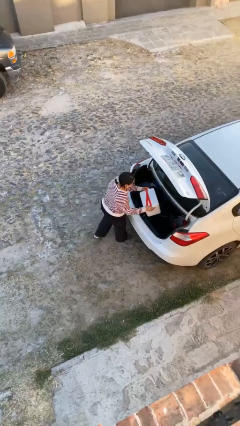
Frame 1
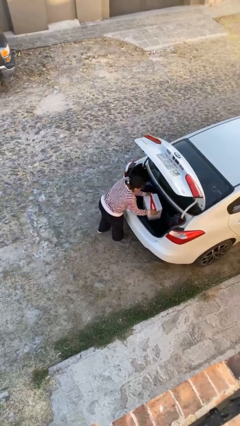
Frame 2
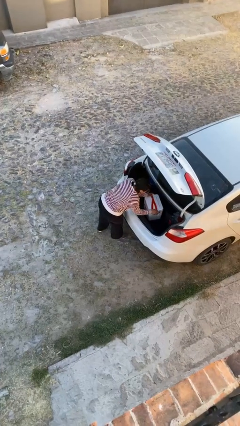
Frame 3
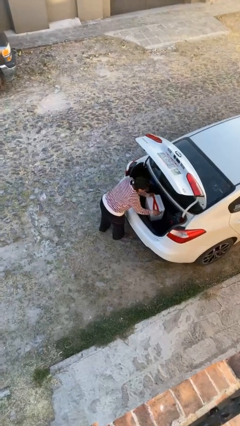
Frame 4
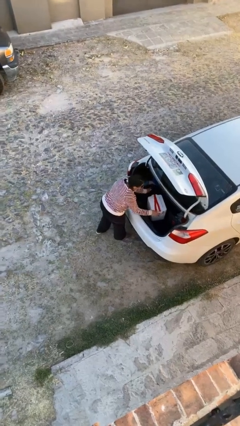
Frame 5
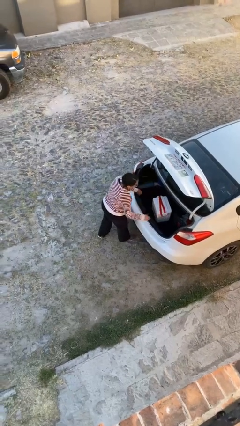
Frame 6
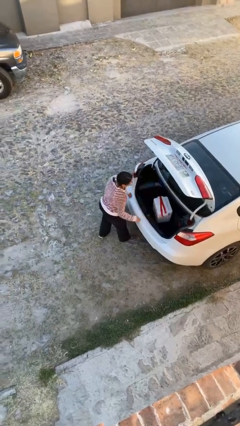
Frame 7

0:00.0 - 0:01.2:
person loads car

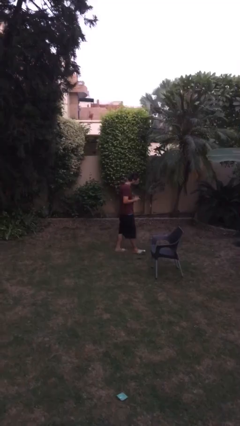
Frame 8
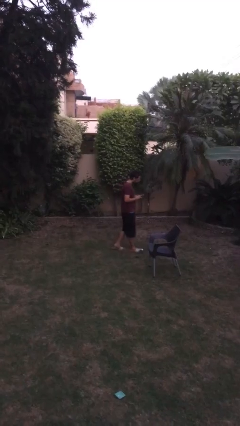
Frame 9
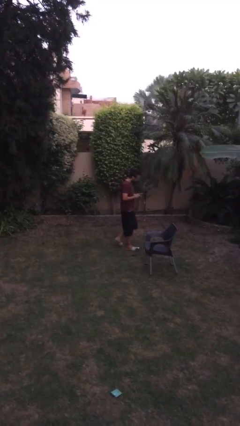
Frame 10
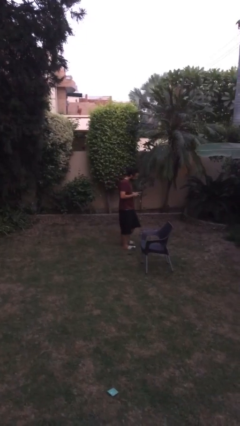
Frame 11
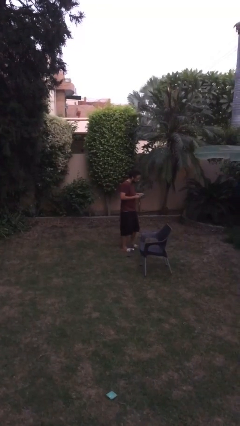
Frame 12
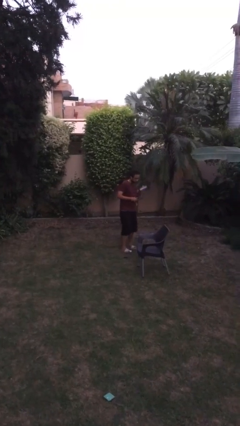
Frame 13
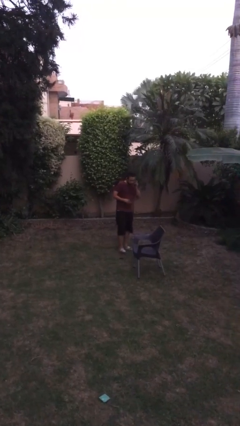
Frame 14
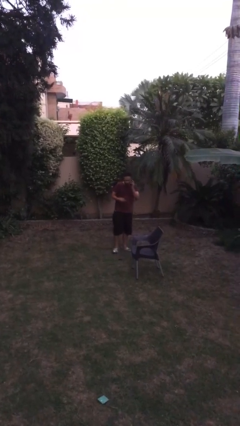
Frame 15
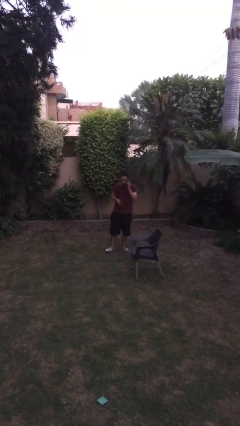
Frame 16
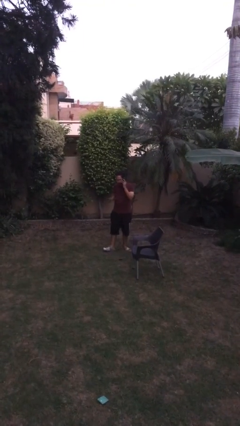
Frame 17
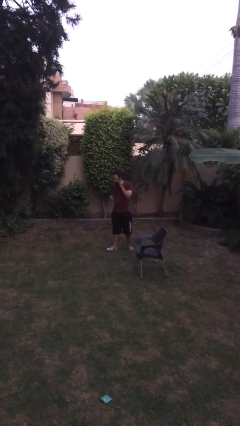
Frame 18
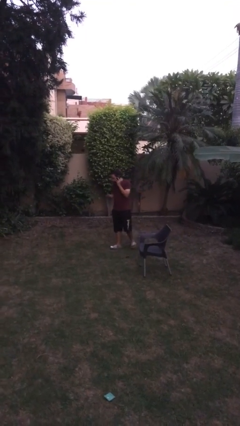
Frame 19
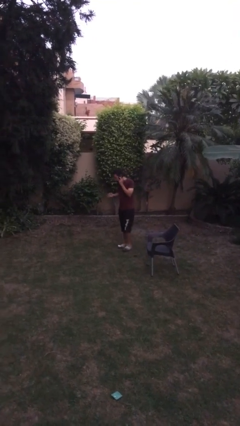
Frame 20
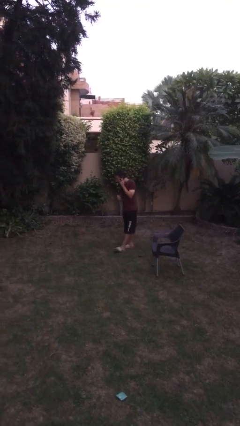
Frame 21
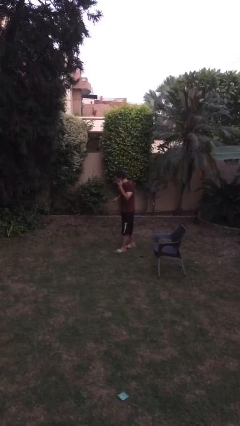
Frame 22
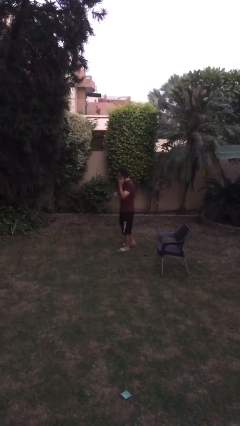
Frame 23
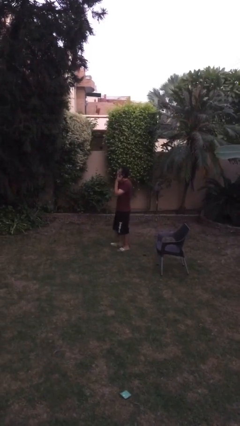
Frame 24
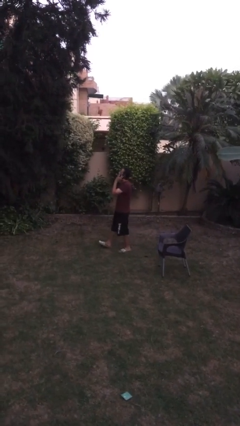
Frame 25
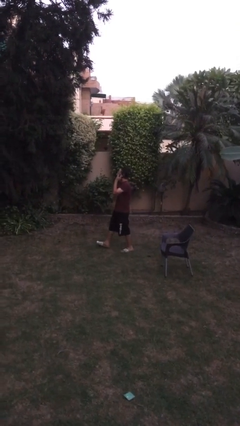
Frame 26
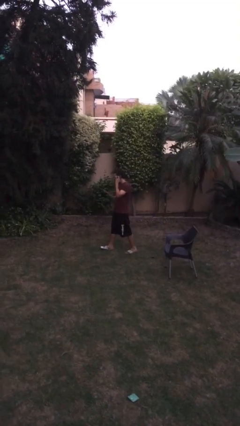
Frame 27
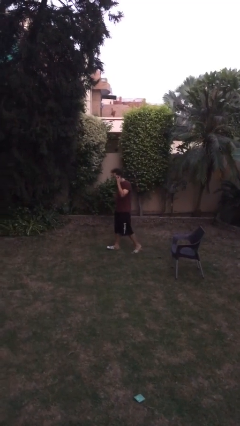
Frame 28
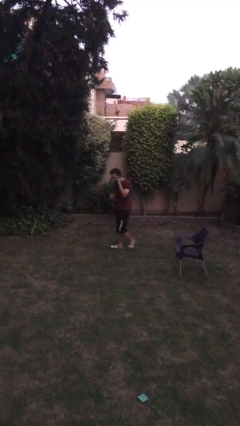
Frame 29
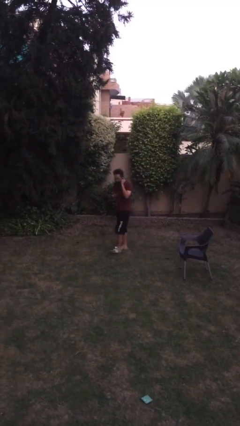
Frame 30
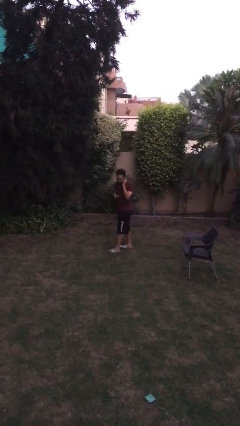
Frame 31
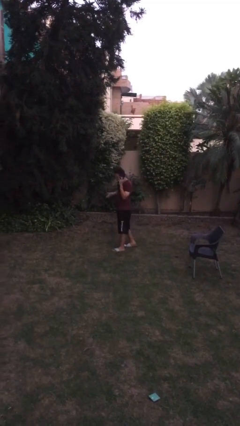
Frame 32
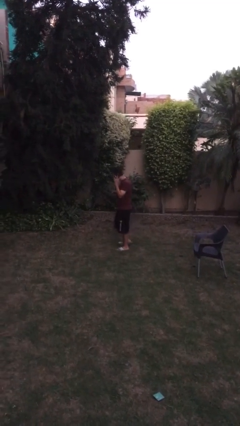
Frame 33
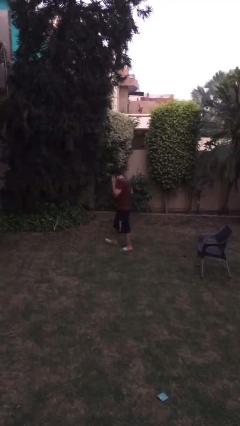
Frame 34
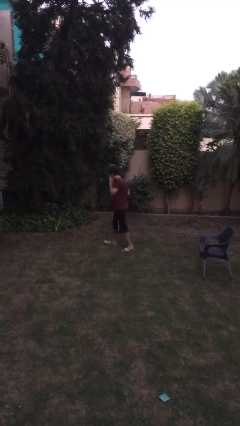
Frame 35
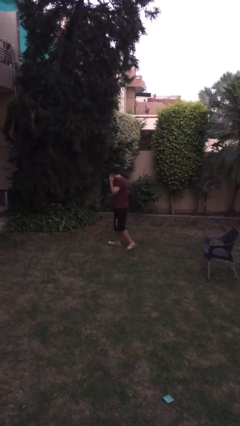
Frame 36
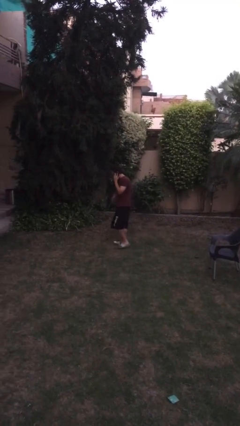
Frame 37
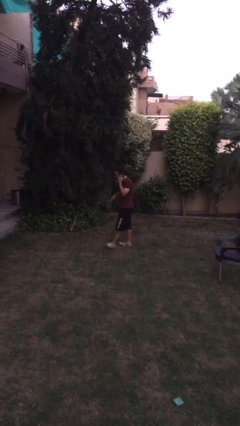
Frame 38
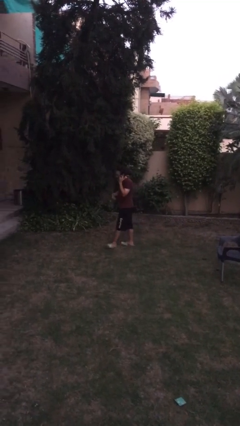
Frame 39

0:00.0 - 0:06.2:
person talks on phone

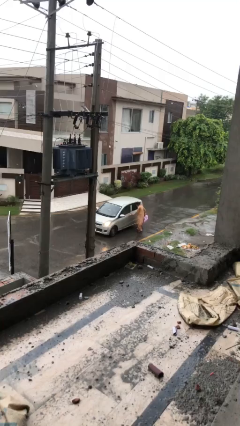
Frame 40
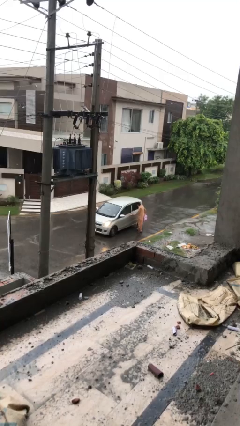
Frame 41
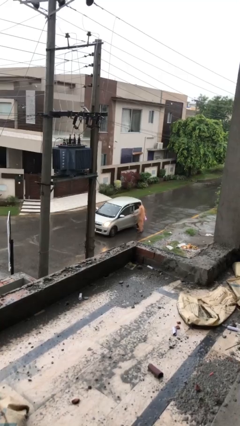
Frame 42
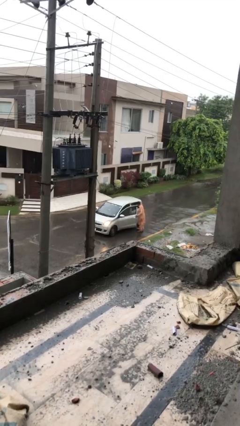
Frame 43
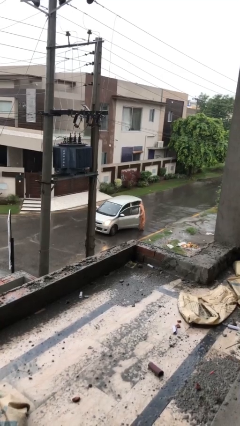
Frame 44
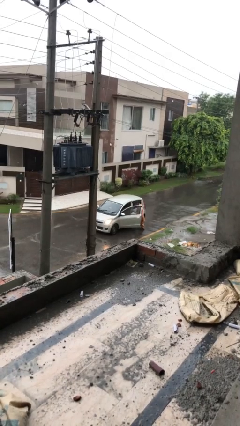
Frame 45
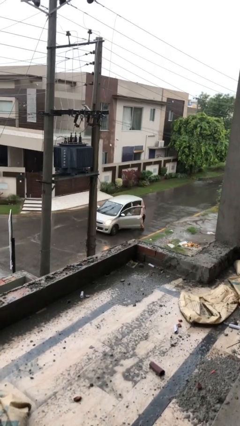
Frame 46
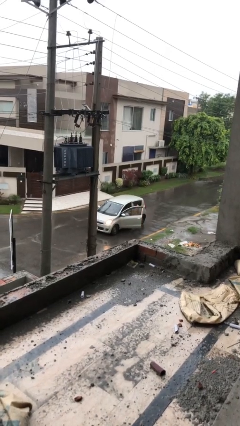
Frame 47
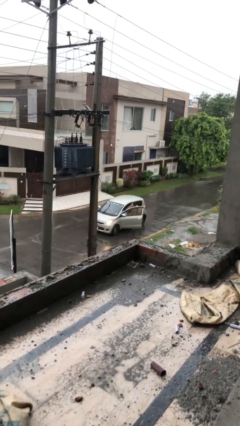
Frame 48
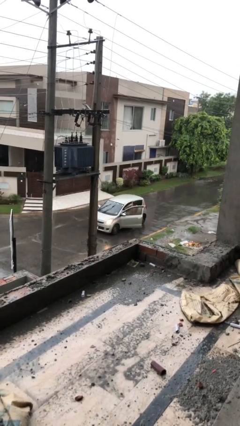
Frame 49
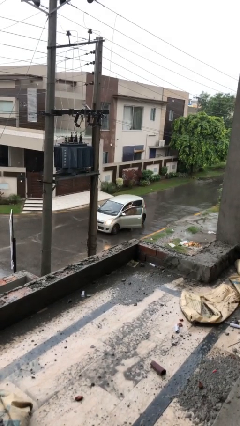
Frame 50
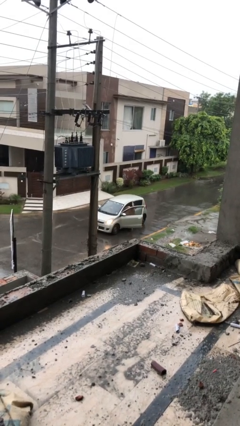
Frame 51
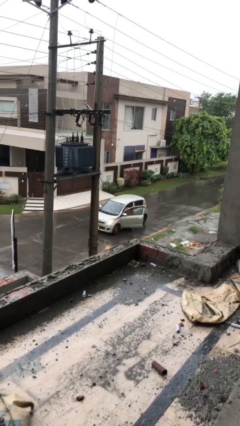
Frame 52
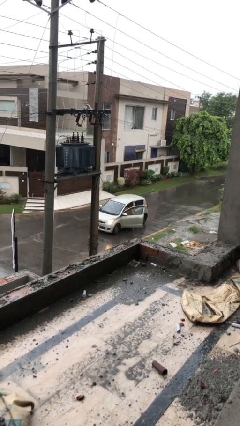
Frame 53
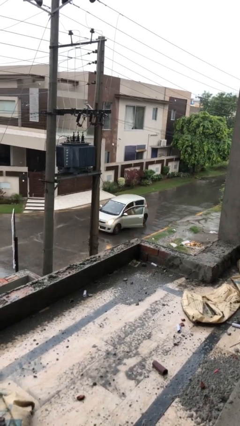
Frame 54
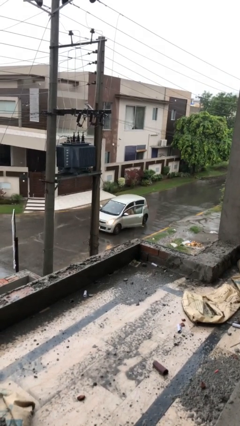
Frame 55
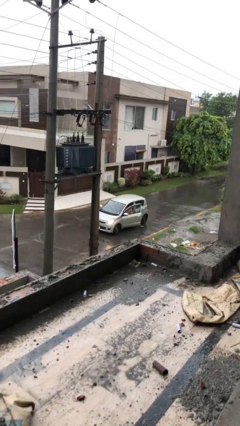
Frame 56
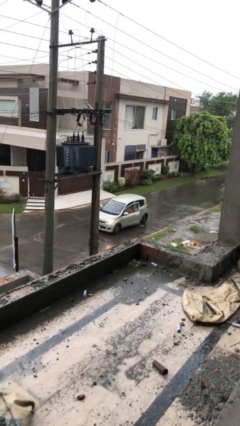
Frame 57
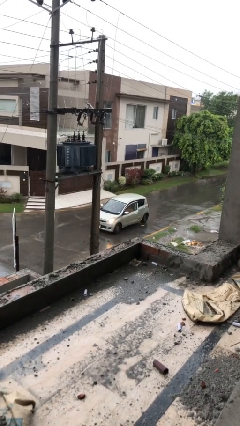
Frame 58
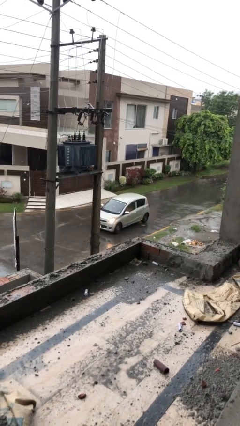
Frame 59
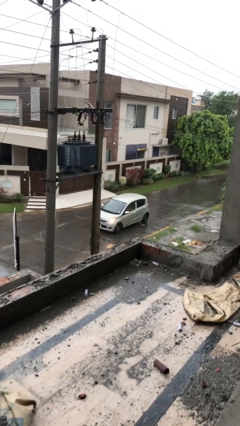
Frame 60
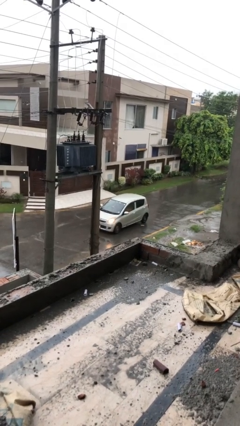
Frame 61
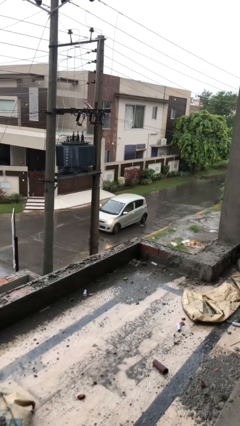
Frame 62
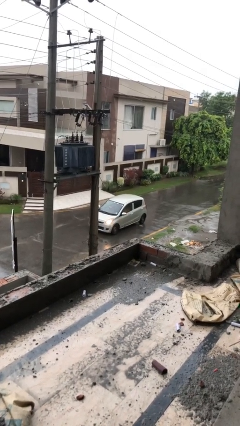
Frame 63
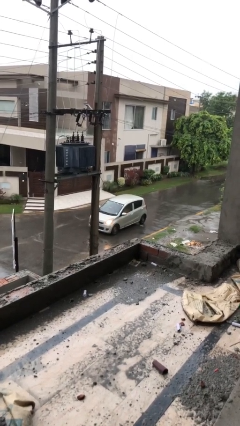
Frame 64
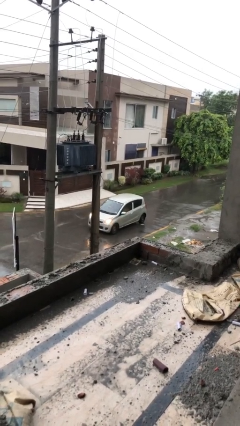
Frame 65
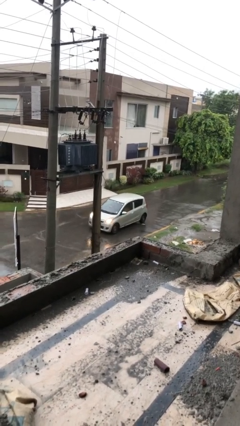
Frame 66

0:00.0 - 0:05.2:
car picks up person

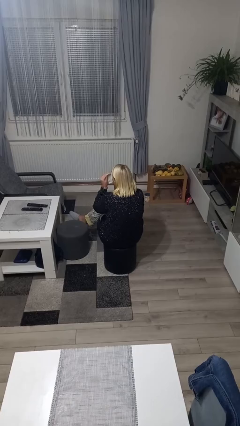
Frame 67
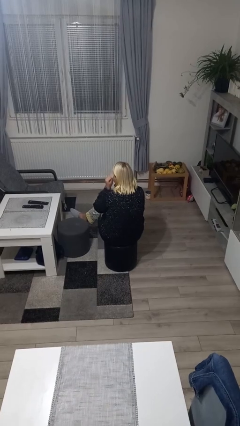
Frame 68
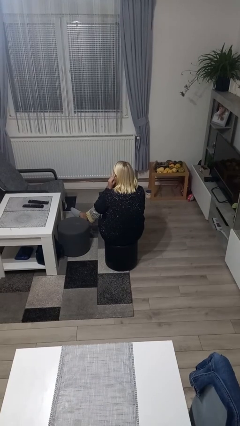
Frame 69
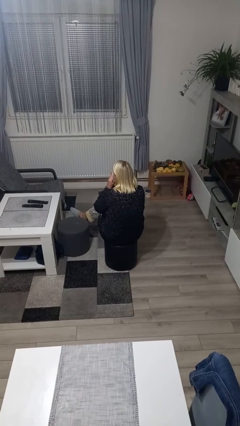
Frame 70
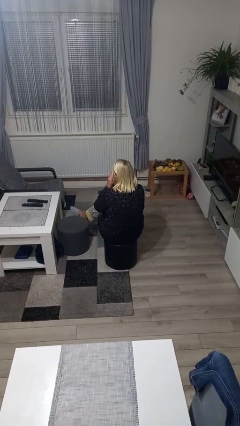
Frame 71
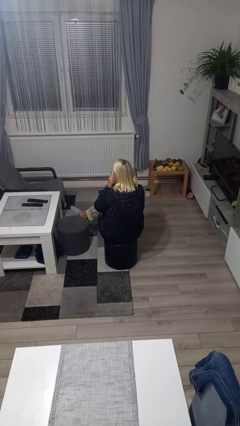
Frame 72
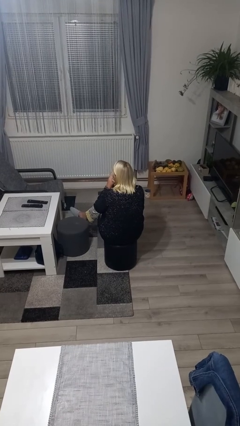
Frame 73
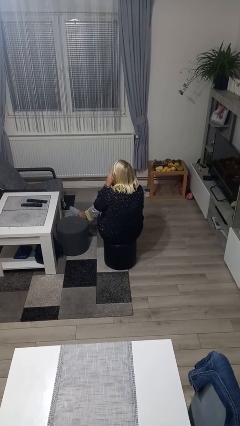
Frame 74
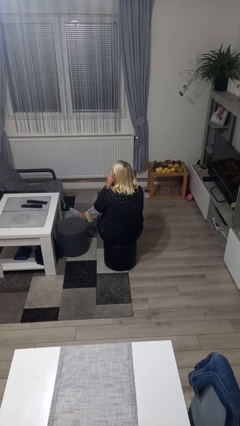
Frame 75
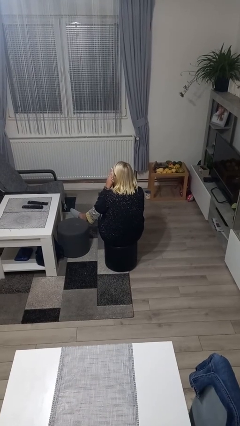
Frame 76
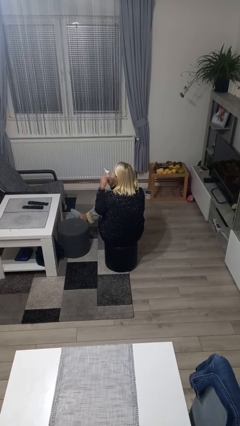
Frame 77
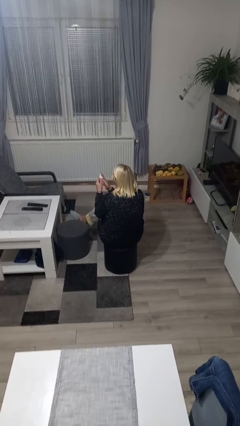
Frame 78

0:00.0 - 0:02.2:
person blows nose

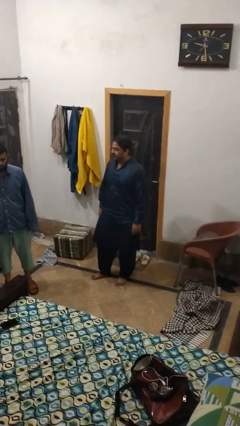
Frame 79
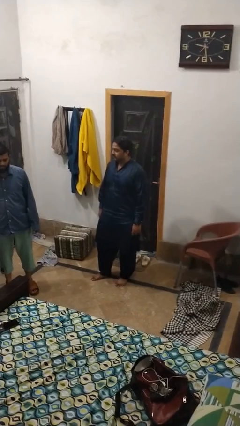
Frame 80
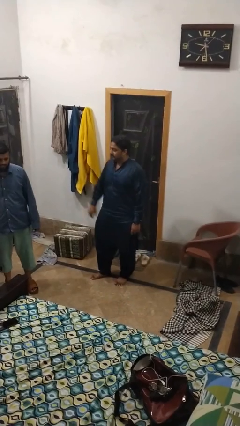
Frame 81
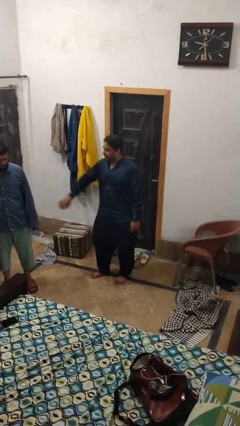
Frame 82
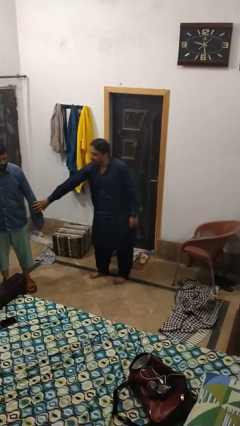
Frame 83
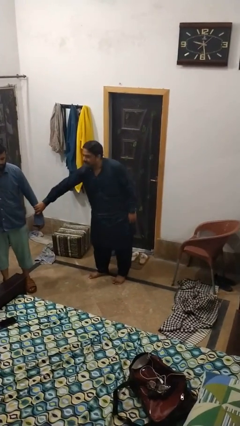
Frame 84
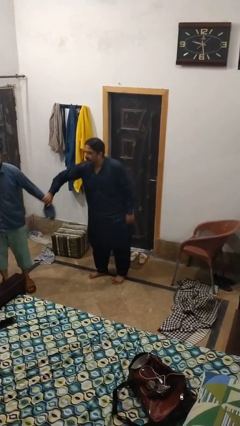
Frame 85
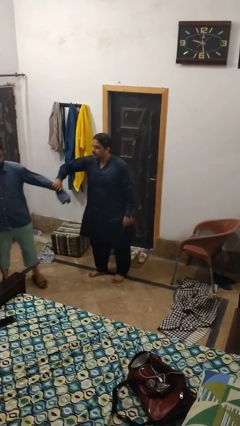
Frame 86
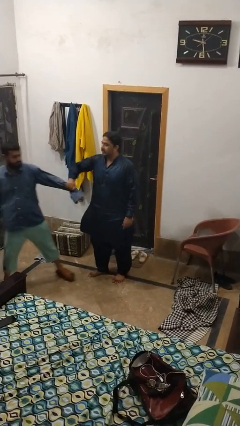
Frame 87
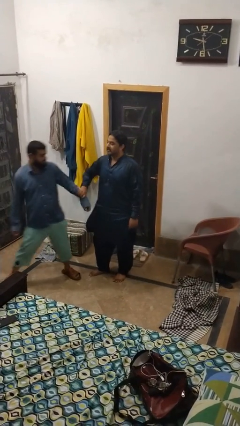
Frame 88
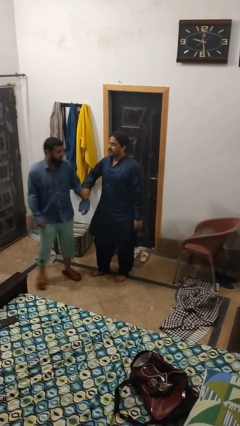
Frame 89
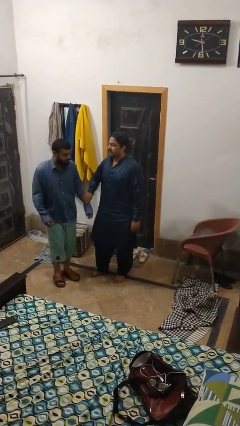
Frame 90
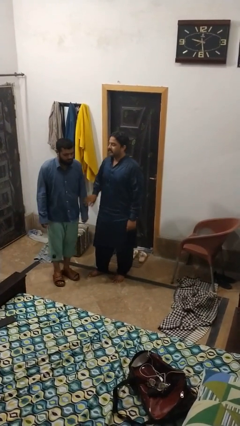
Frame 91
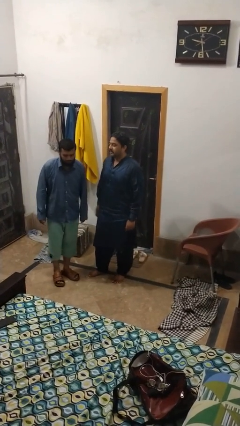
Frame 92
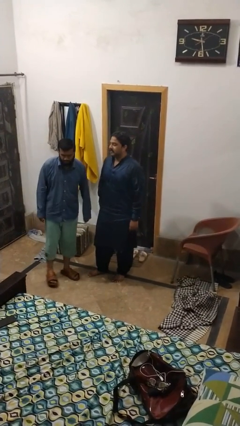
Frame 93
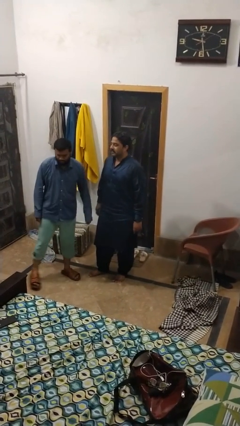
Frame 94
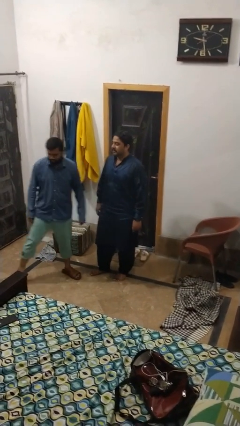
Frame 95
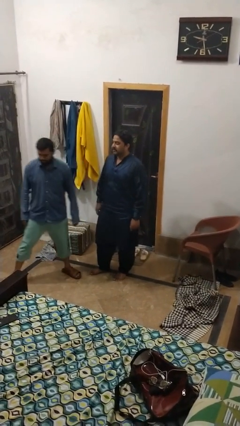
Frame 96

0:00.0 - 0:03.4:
person grabs person by forearm
